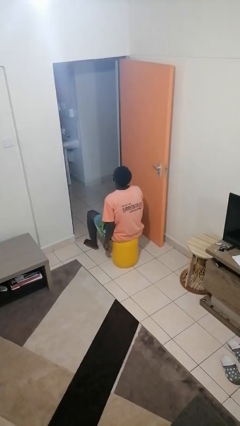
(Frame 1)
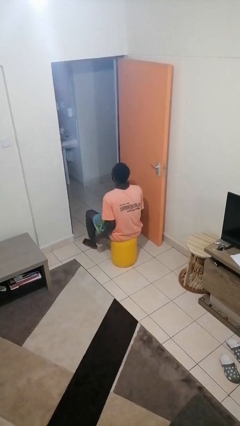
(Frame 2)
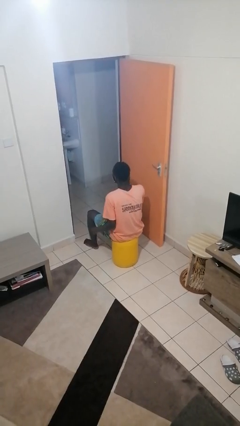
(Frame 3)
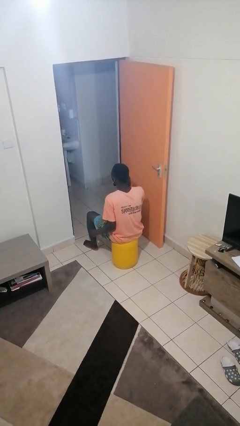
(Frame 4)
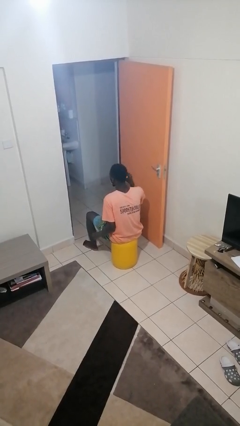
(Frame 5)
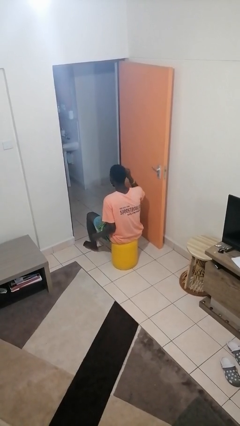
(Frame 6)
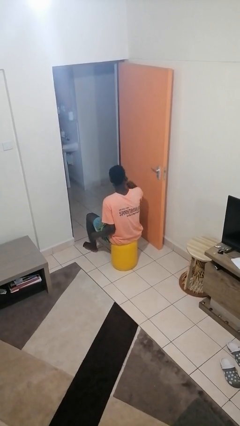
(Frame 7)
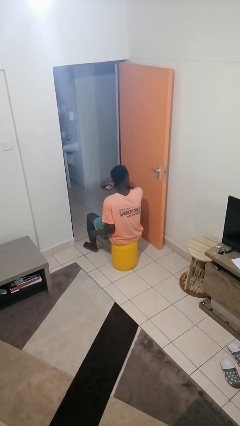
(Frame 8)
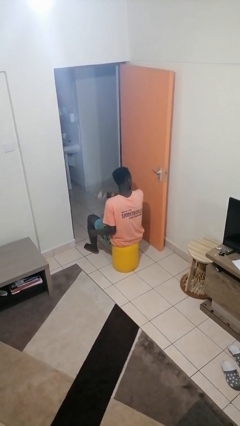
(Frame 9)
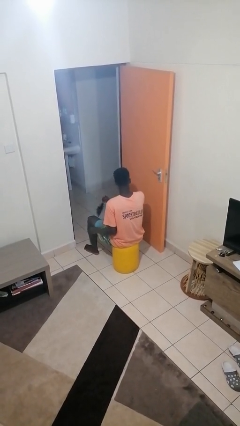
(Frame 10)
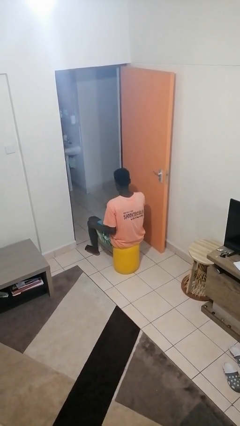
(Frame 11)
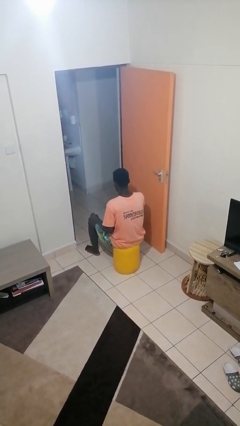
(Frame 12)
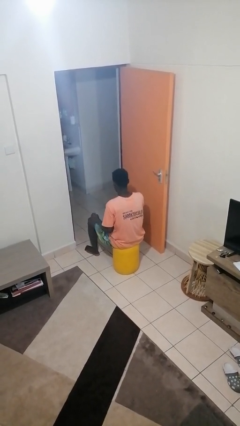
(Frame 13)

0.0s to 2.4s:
person takes off facemask

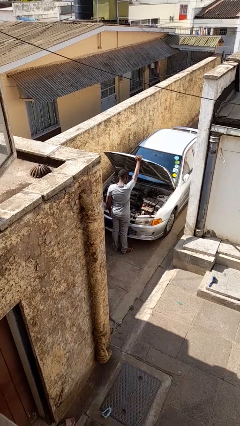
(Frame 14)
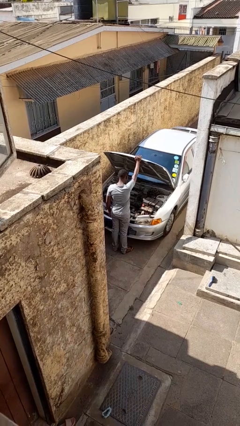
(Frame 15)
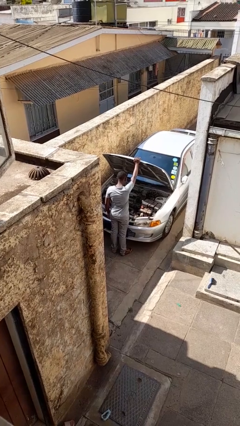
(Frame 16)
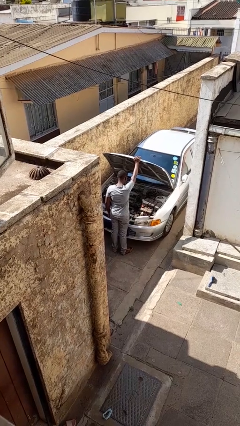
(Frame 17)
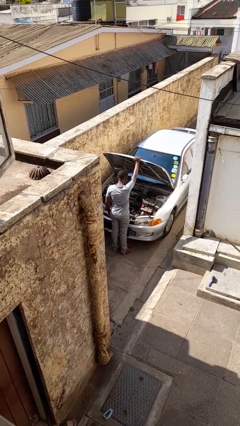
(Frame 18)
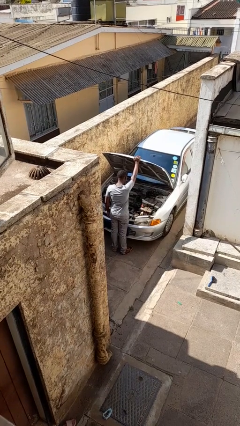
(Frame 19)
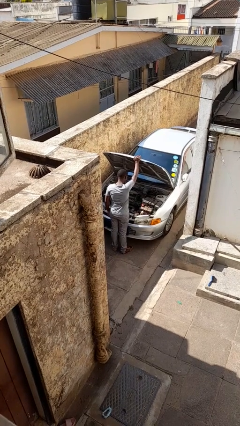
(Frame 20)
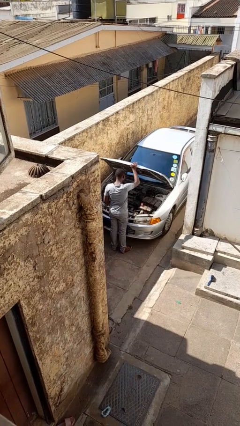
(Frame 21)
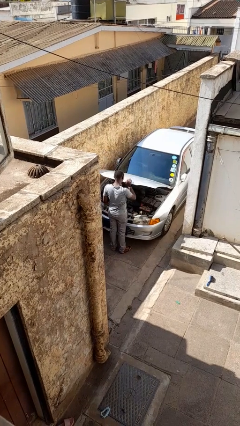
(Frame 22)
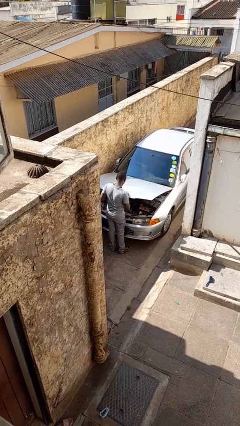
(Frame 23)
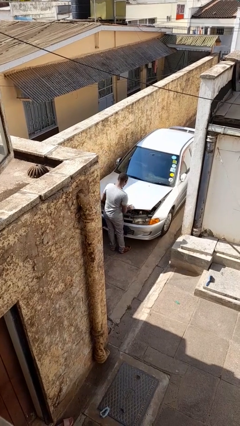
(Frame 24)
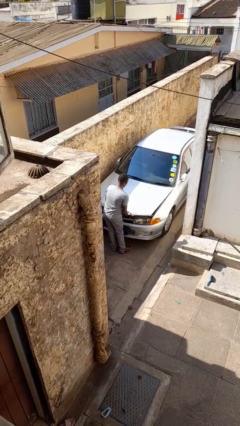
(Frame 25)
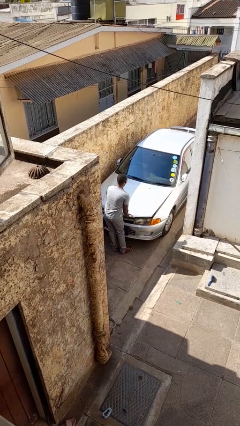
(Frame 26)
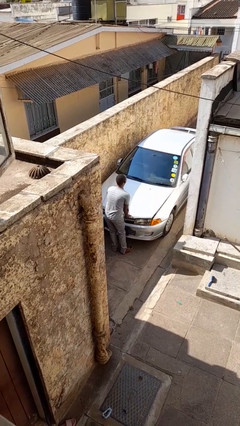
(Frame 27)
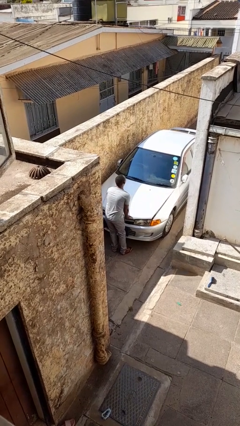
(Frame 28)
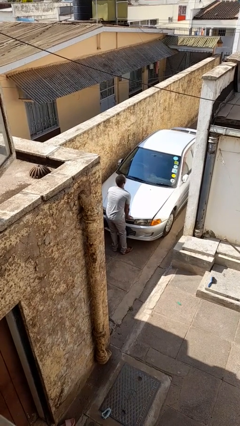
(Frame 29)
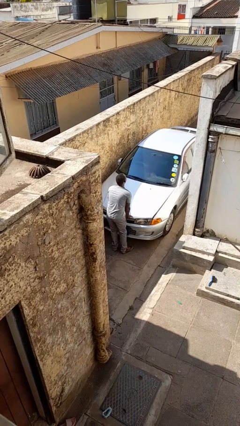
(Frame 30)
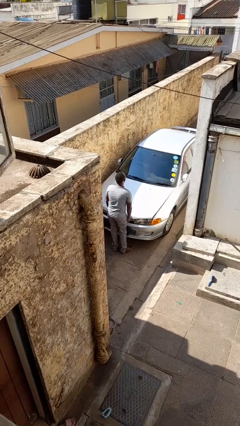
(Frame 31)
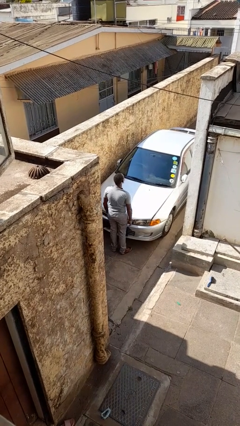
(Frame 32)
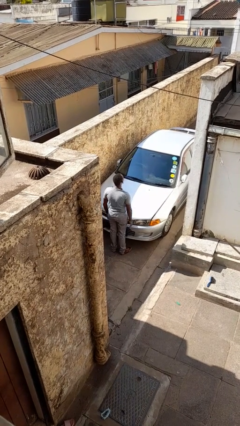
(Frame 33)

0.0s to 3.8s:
person closes car hood

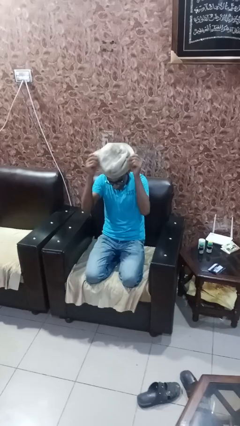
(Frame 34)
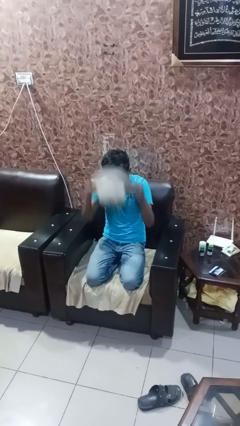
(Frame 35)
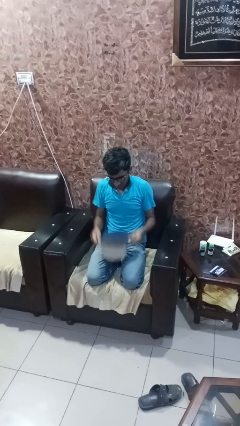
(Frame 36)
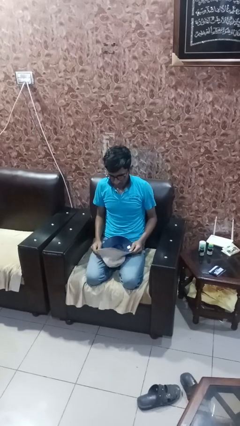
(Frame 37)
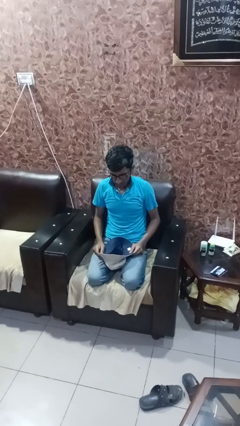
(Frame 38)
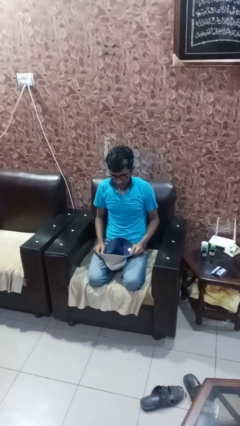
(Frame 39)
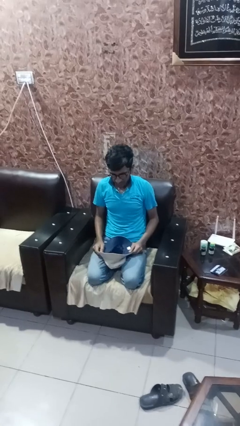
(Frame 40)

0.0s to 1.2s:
person takes off hat

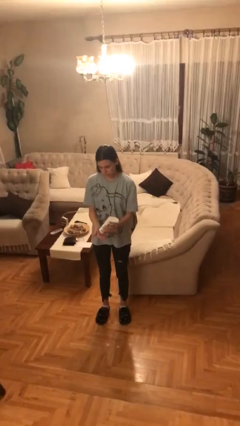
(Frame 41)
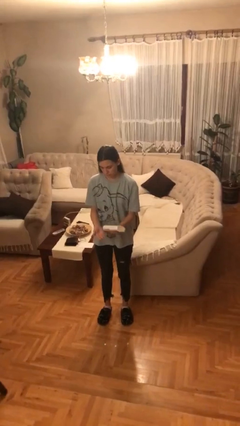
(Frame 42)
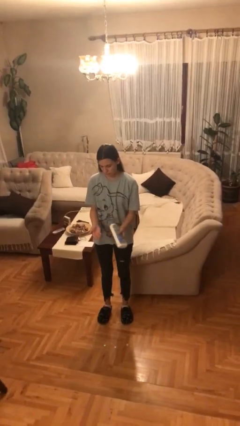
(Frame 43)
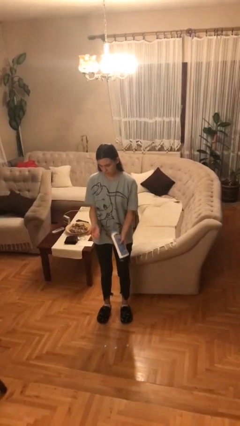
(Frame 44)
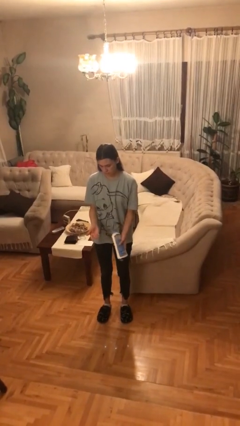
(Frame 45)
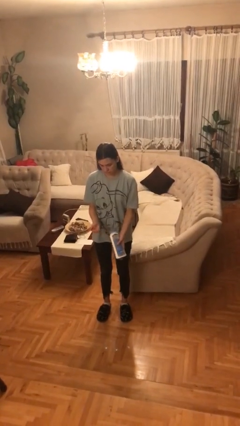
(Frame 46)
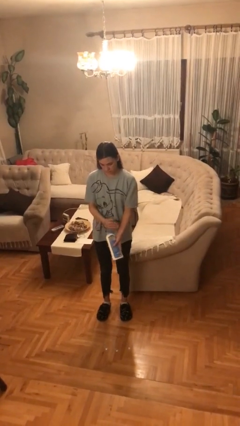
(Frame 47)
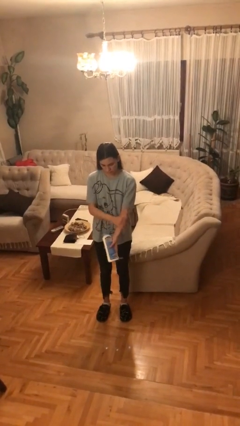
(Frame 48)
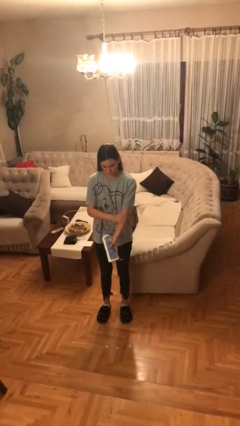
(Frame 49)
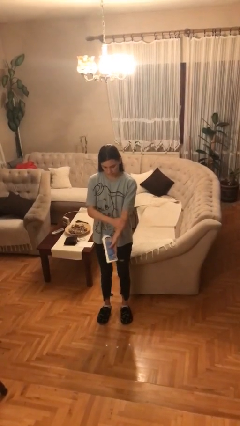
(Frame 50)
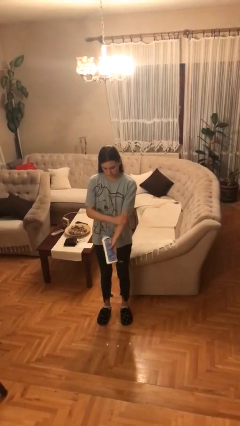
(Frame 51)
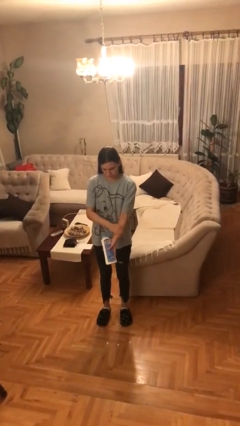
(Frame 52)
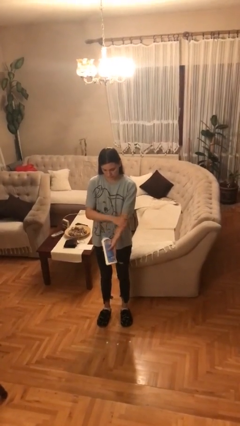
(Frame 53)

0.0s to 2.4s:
person applies sunscreen

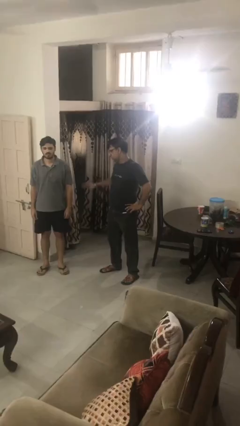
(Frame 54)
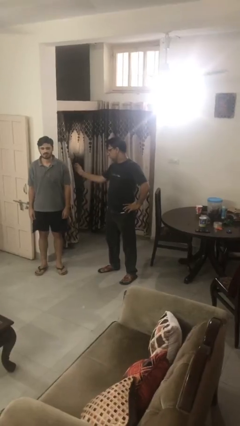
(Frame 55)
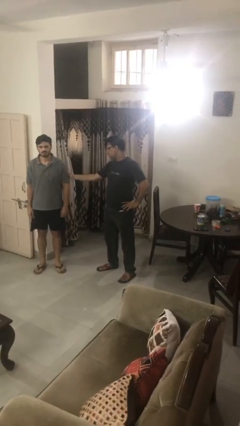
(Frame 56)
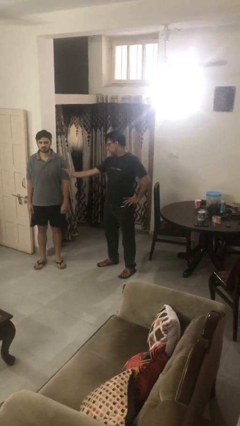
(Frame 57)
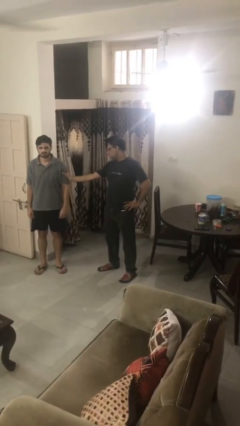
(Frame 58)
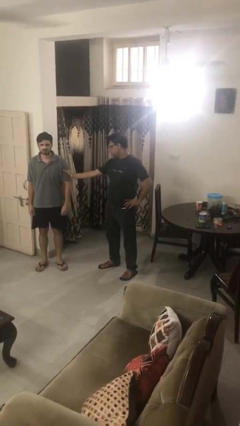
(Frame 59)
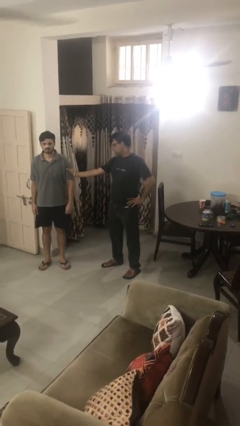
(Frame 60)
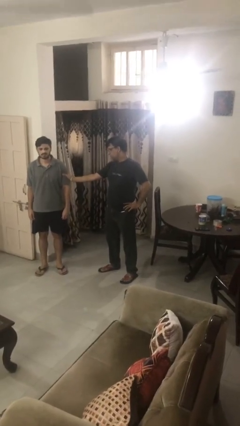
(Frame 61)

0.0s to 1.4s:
person grabs person by bicep

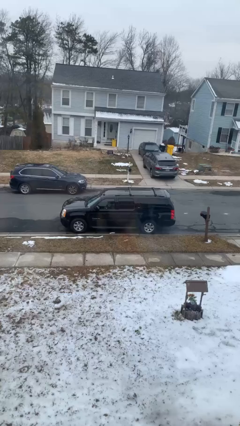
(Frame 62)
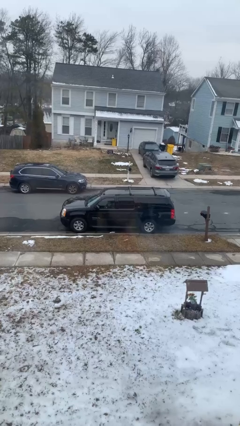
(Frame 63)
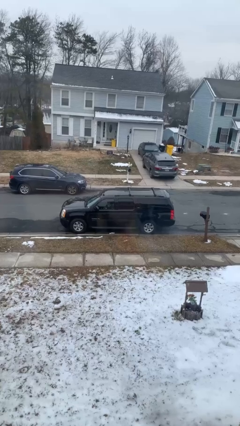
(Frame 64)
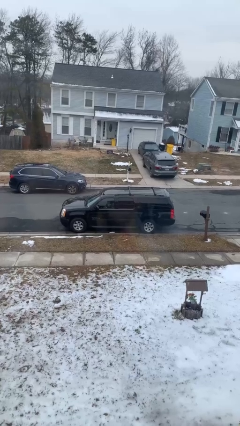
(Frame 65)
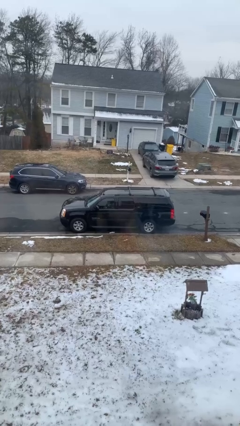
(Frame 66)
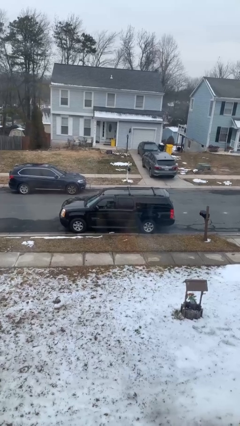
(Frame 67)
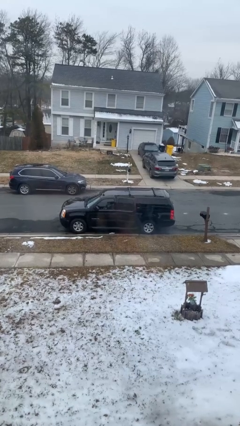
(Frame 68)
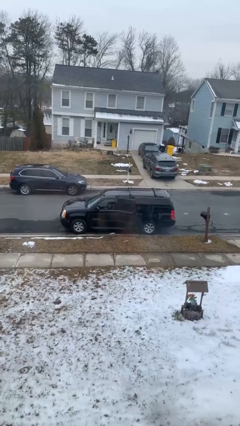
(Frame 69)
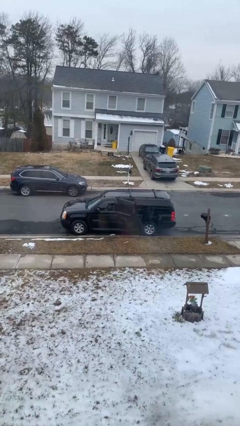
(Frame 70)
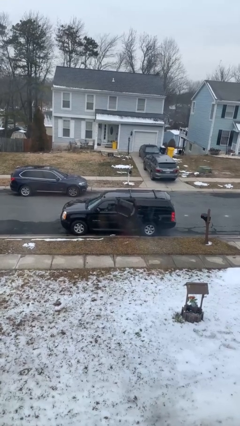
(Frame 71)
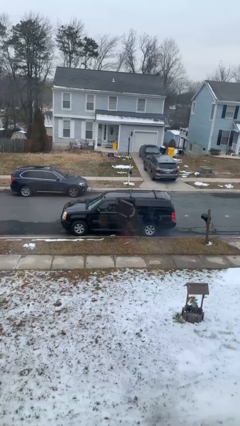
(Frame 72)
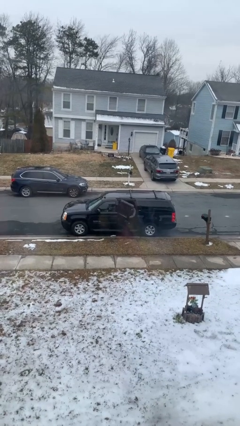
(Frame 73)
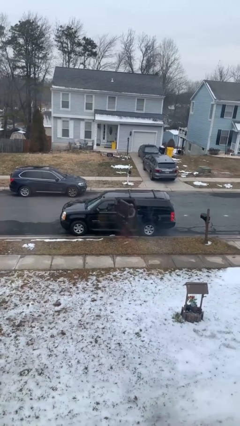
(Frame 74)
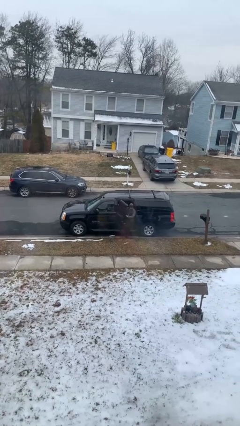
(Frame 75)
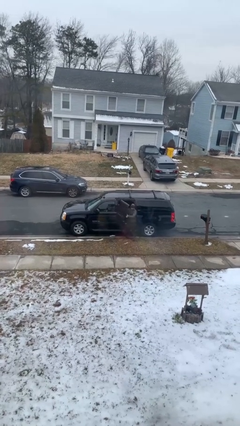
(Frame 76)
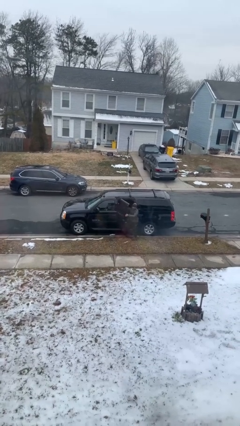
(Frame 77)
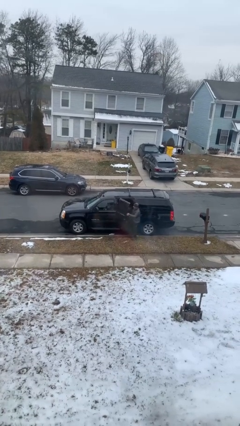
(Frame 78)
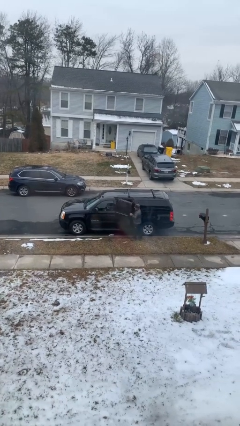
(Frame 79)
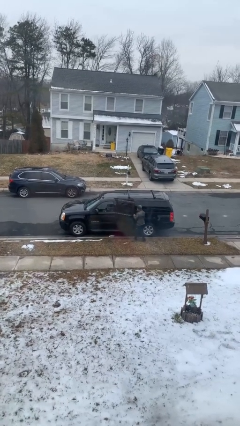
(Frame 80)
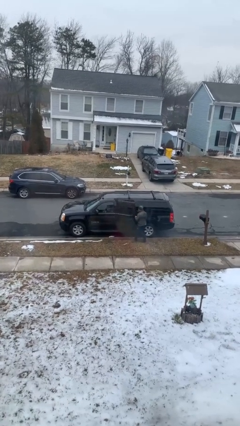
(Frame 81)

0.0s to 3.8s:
car drops off person

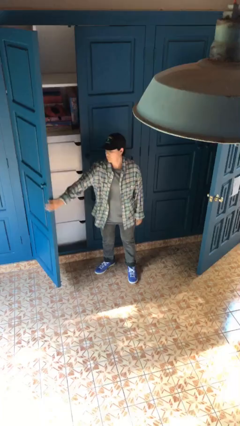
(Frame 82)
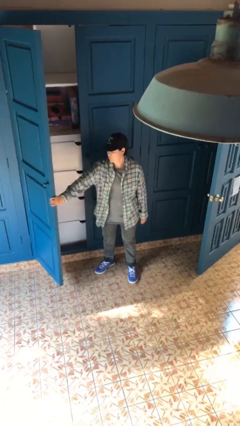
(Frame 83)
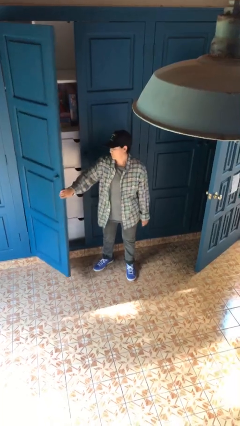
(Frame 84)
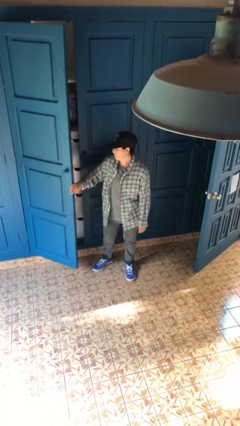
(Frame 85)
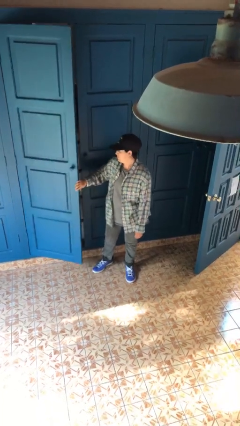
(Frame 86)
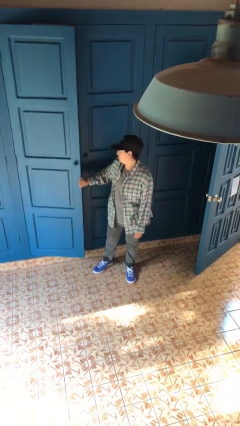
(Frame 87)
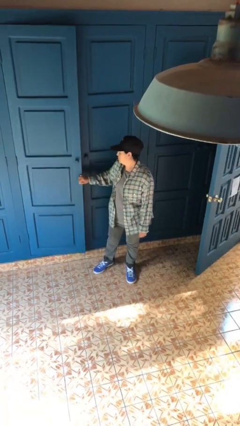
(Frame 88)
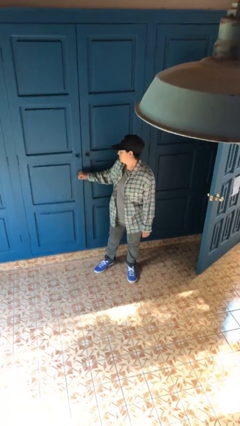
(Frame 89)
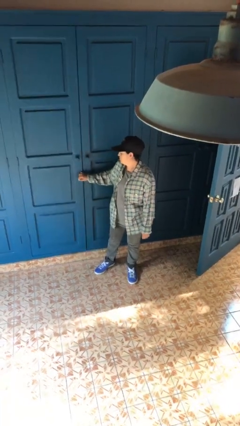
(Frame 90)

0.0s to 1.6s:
person closes closet door

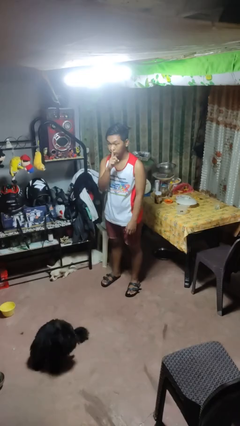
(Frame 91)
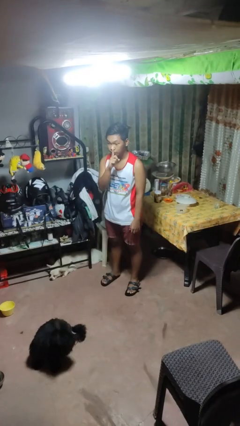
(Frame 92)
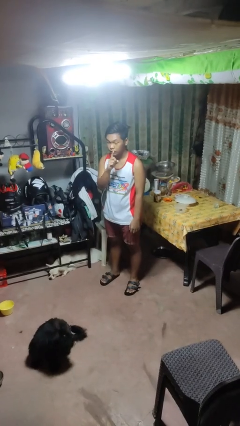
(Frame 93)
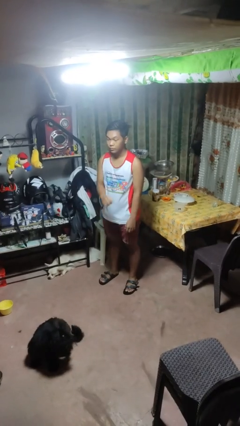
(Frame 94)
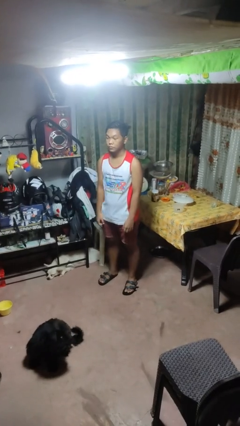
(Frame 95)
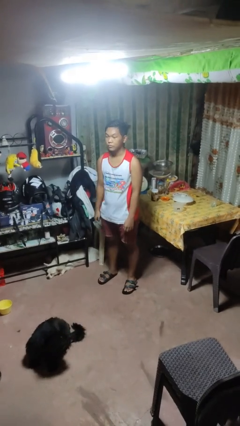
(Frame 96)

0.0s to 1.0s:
person gestures be quiet
